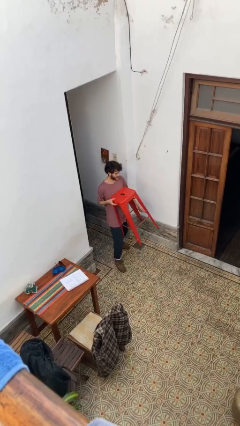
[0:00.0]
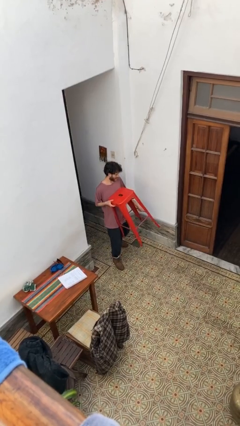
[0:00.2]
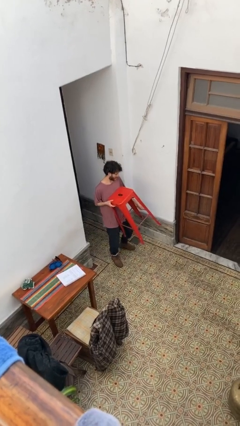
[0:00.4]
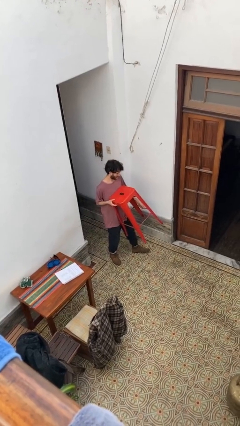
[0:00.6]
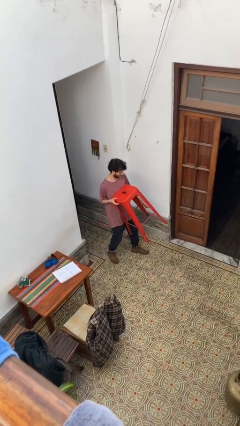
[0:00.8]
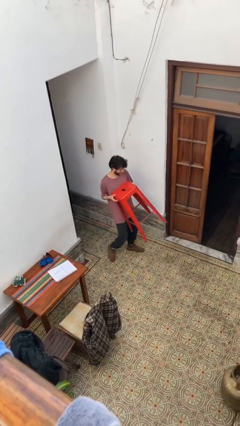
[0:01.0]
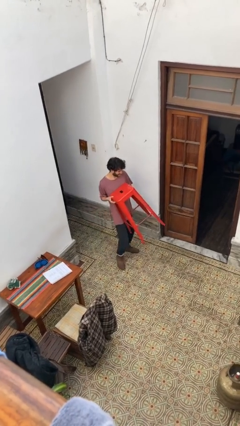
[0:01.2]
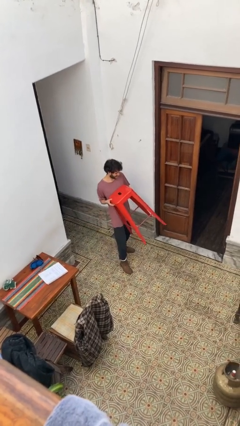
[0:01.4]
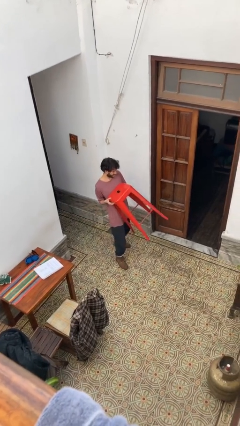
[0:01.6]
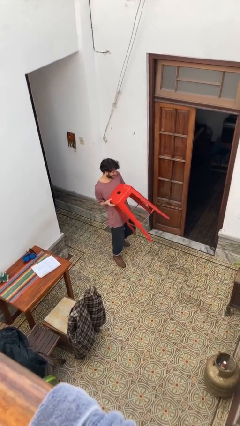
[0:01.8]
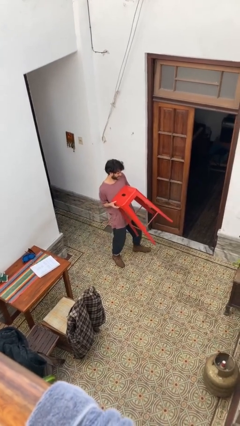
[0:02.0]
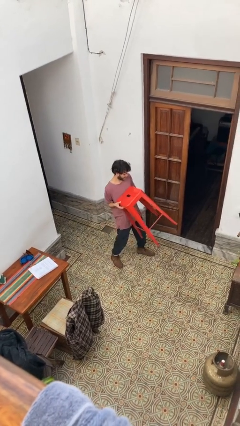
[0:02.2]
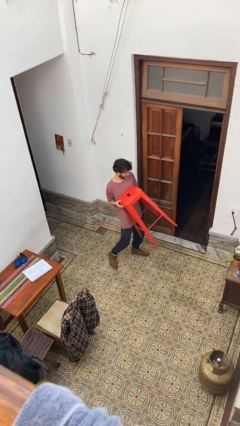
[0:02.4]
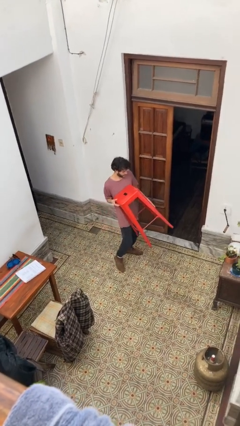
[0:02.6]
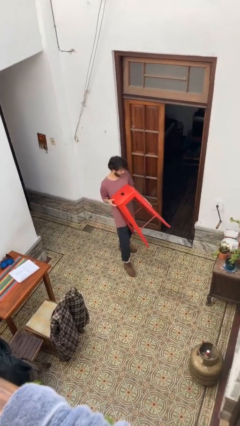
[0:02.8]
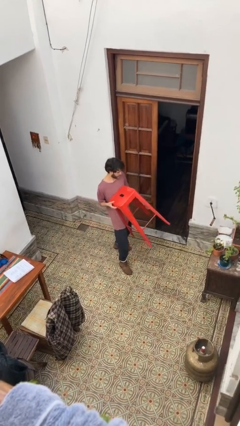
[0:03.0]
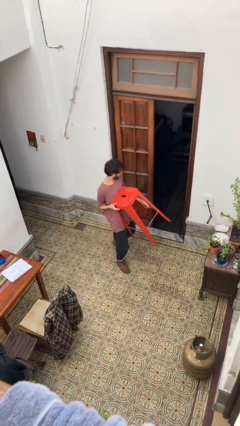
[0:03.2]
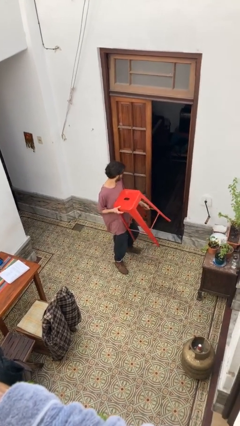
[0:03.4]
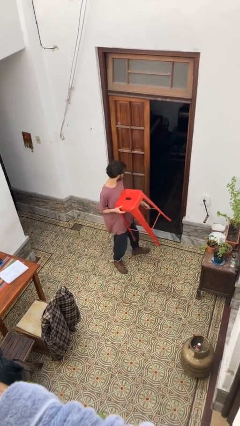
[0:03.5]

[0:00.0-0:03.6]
person carries heavy object

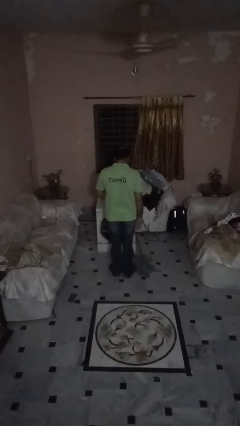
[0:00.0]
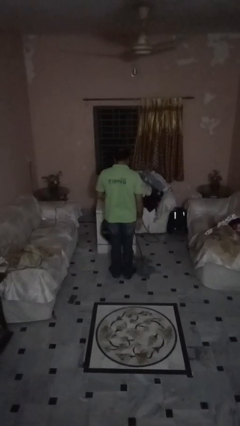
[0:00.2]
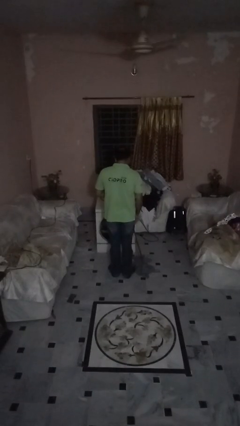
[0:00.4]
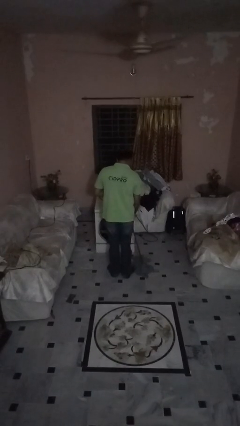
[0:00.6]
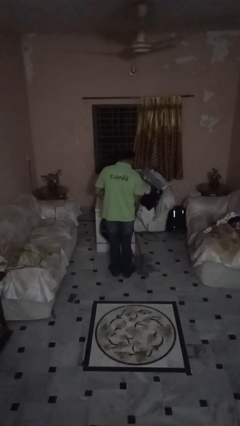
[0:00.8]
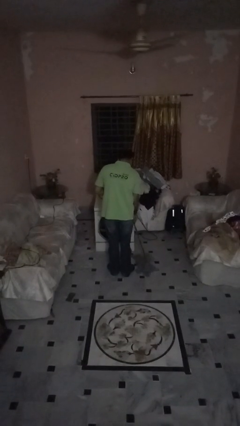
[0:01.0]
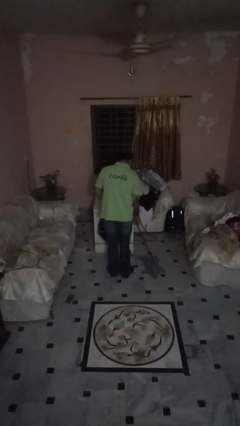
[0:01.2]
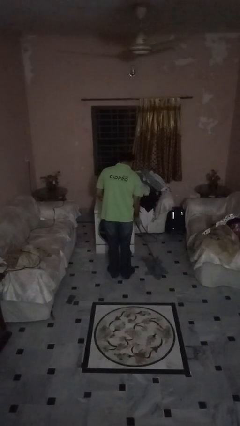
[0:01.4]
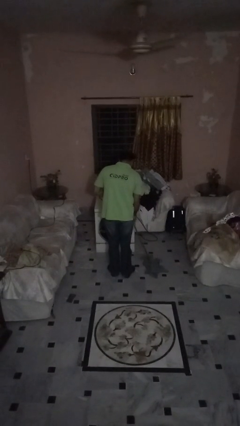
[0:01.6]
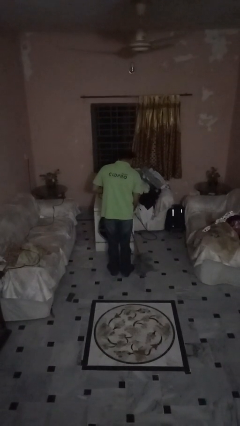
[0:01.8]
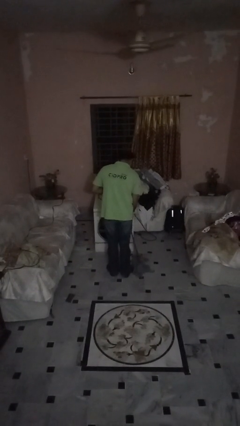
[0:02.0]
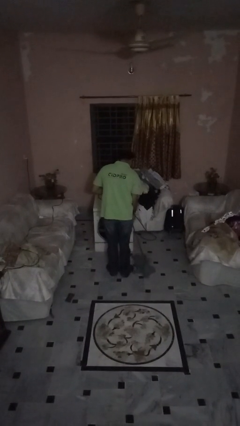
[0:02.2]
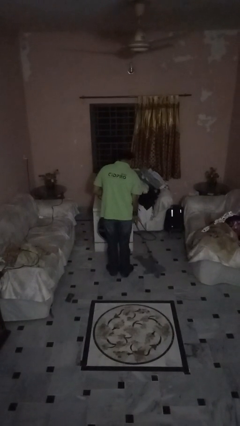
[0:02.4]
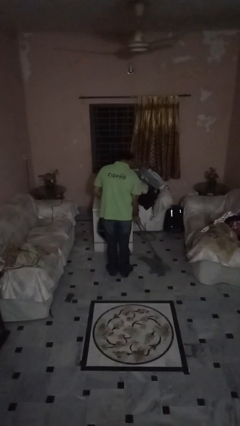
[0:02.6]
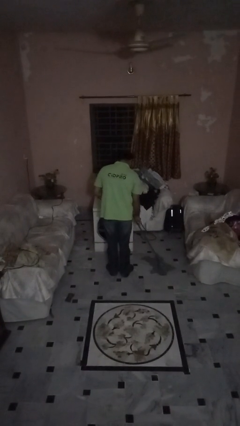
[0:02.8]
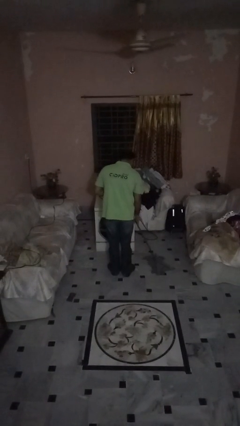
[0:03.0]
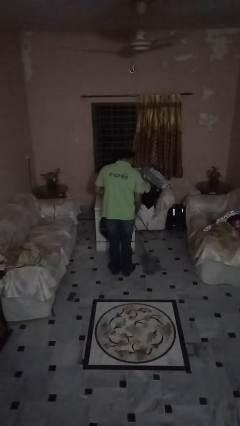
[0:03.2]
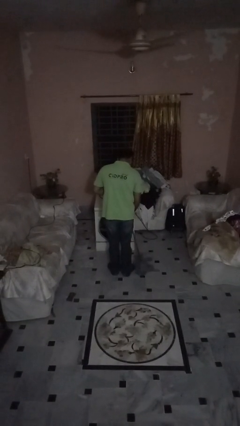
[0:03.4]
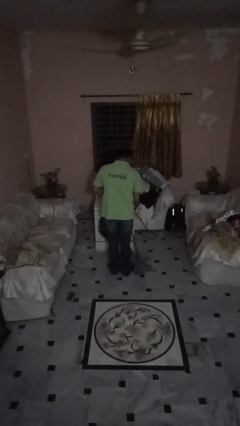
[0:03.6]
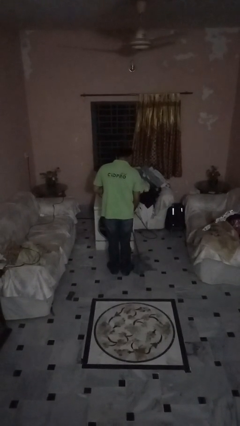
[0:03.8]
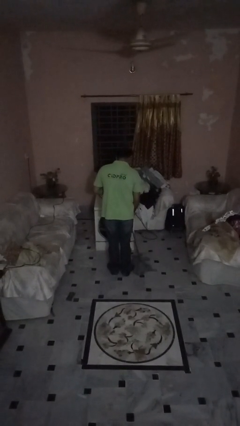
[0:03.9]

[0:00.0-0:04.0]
person mops

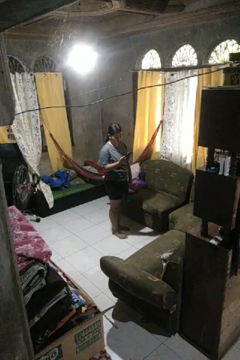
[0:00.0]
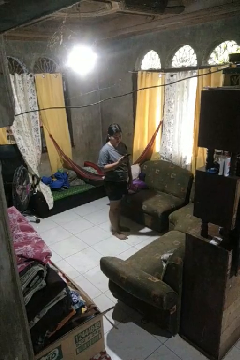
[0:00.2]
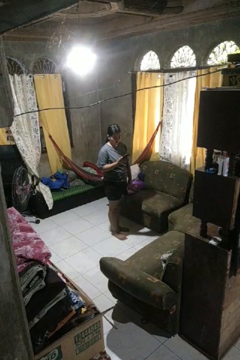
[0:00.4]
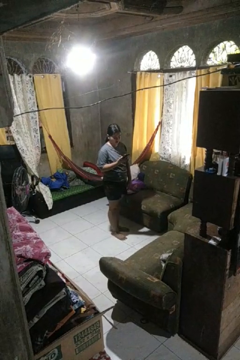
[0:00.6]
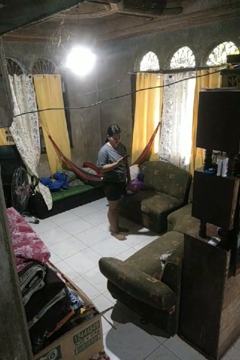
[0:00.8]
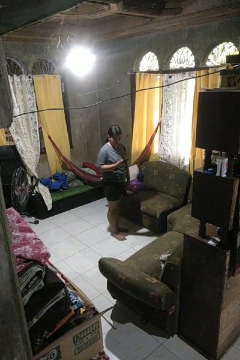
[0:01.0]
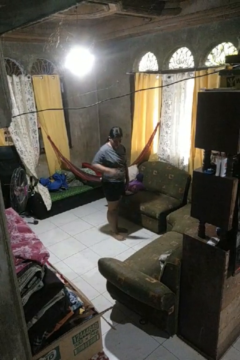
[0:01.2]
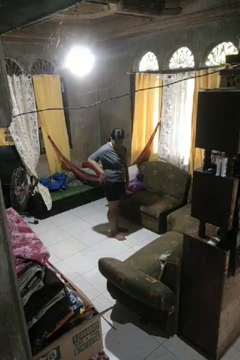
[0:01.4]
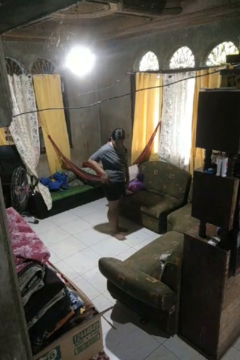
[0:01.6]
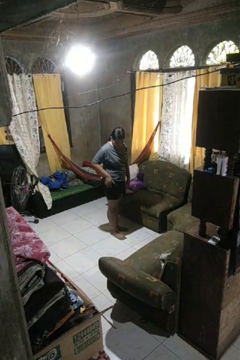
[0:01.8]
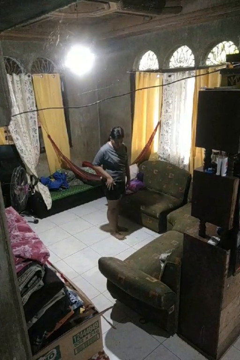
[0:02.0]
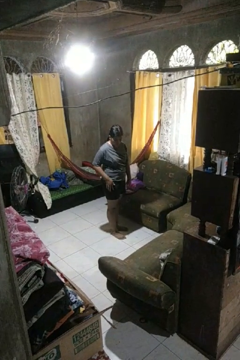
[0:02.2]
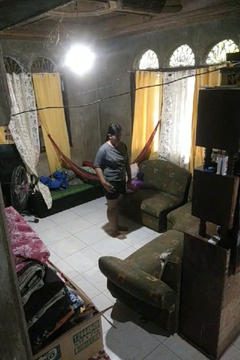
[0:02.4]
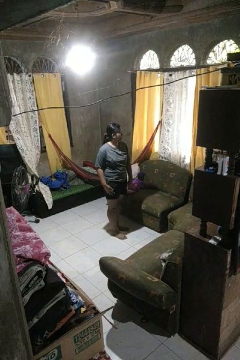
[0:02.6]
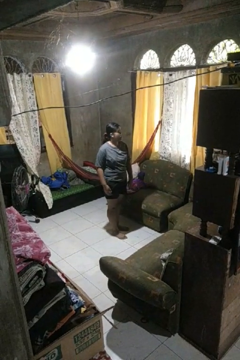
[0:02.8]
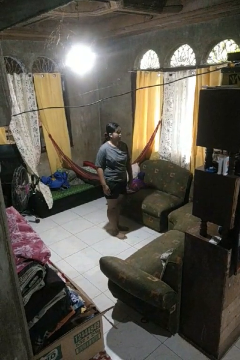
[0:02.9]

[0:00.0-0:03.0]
person puts phone into pocket

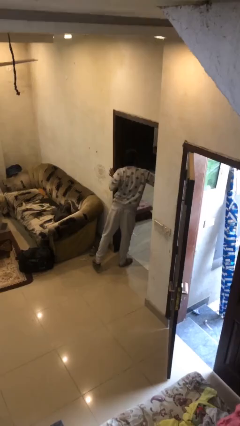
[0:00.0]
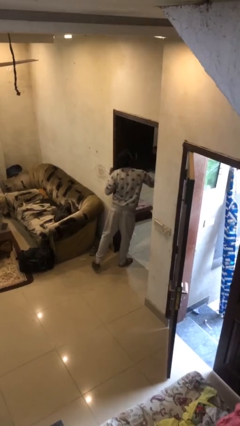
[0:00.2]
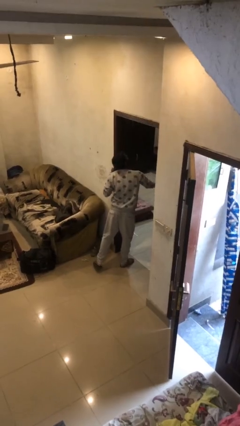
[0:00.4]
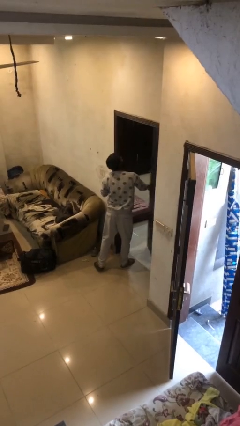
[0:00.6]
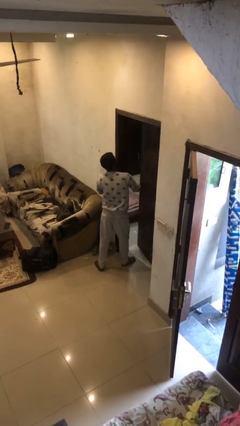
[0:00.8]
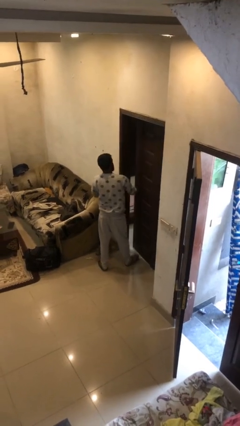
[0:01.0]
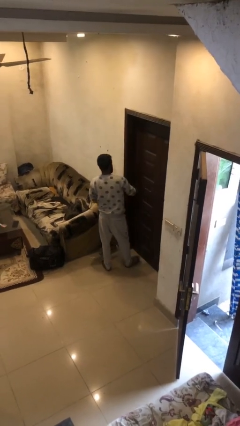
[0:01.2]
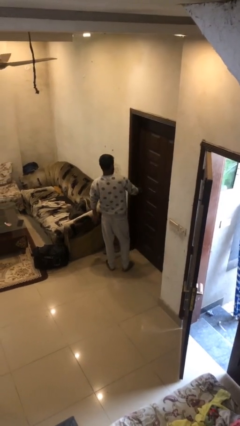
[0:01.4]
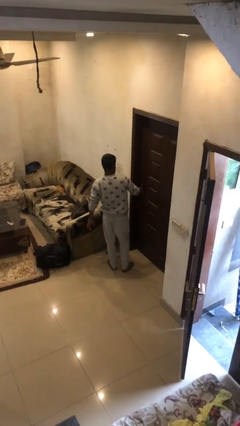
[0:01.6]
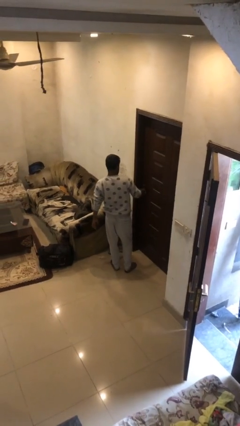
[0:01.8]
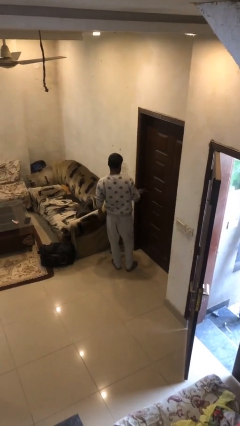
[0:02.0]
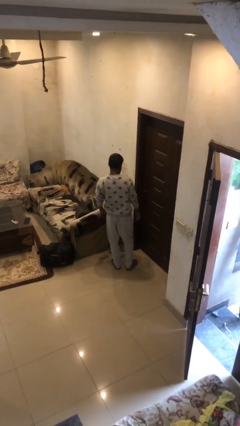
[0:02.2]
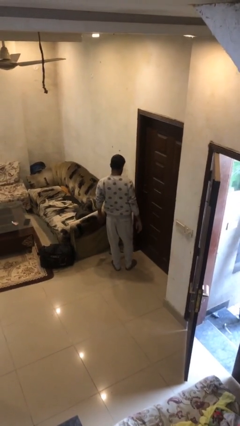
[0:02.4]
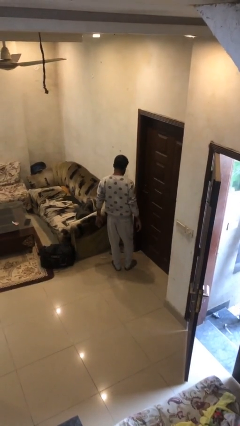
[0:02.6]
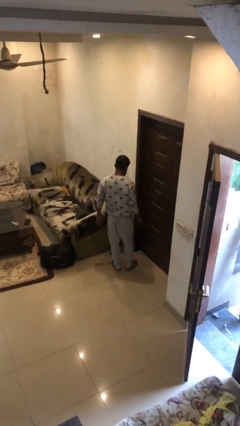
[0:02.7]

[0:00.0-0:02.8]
person closes facility door

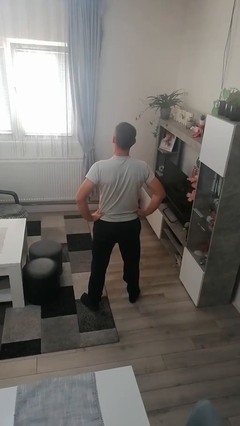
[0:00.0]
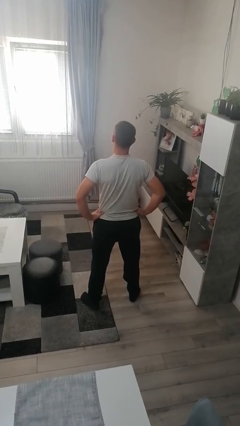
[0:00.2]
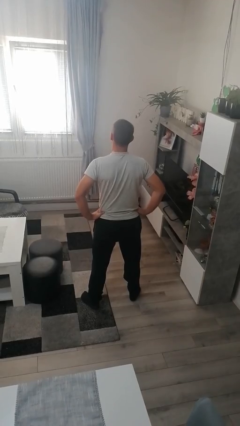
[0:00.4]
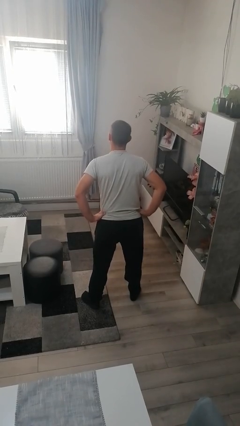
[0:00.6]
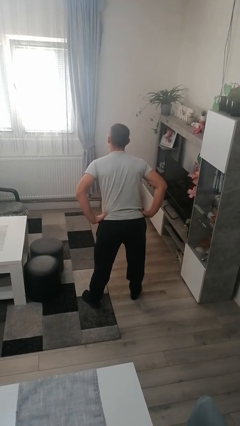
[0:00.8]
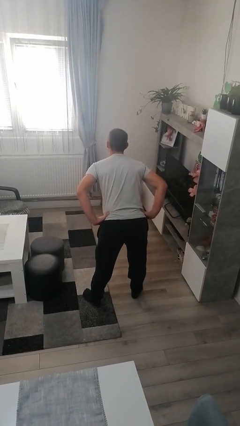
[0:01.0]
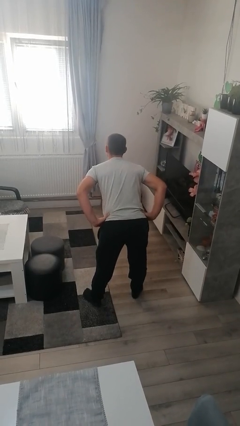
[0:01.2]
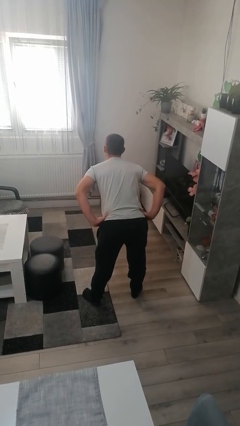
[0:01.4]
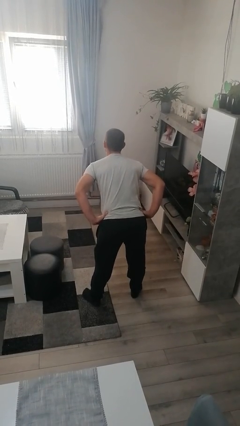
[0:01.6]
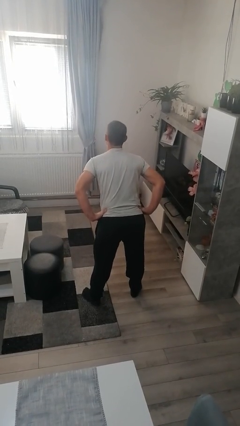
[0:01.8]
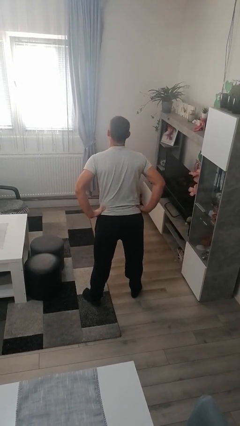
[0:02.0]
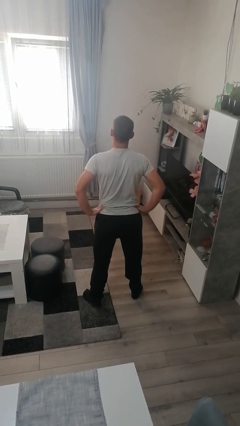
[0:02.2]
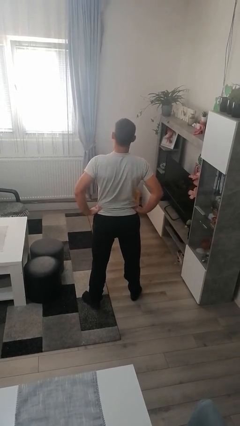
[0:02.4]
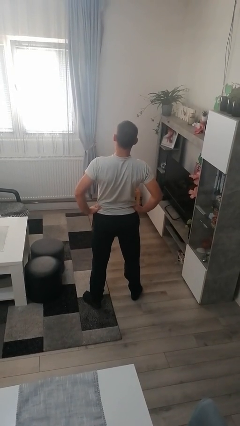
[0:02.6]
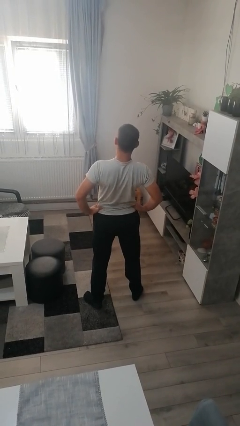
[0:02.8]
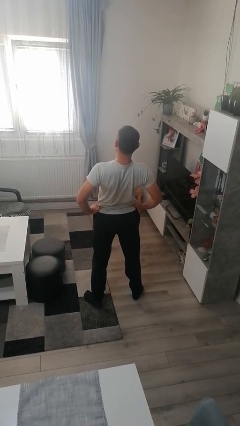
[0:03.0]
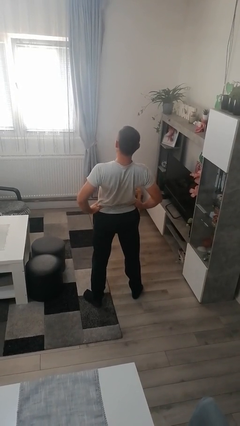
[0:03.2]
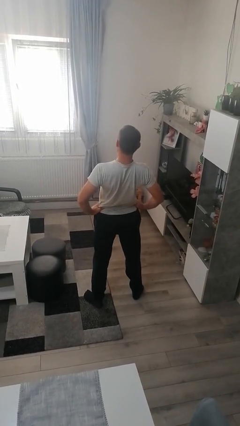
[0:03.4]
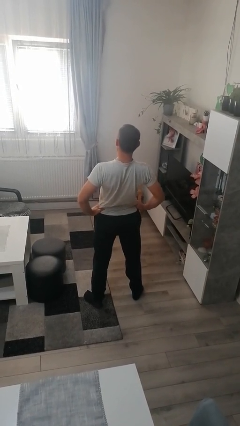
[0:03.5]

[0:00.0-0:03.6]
person wiggles hips

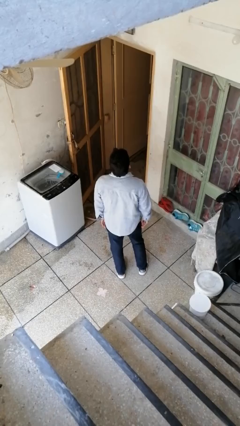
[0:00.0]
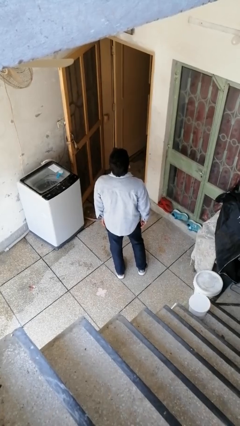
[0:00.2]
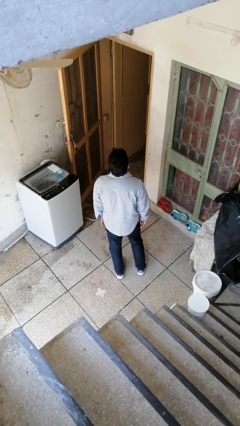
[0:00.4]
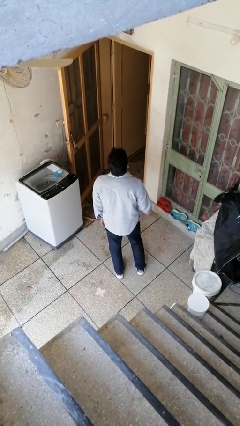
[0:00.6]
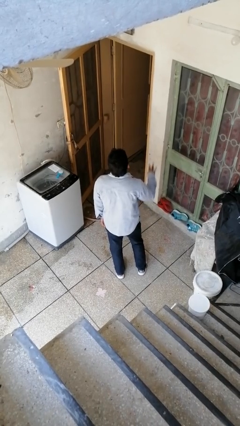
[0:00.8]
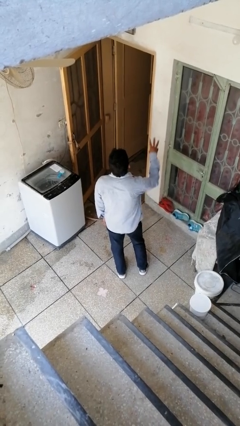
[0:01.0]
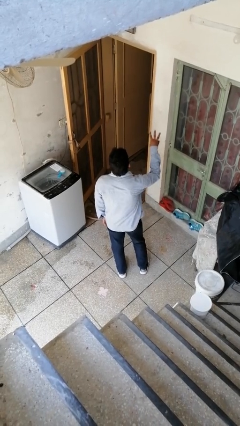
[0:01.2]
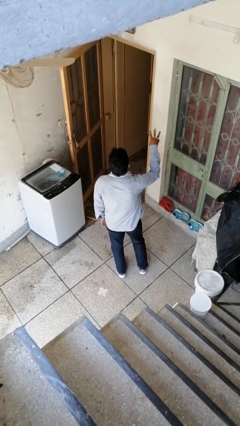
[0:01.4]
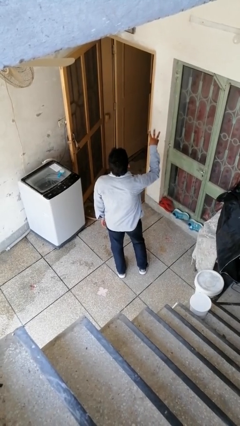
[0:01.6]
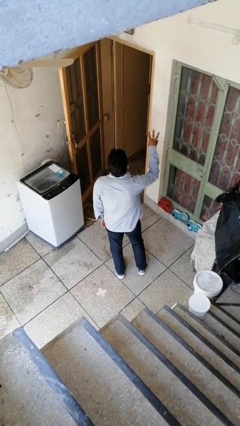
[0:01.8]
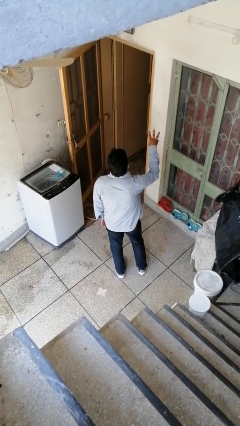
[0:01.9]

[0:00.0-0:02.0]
person gestures number three
